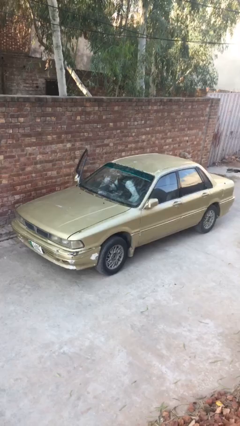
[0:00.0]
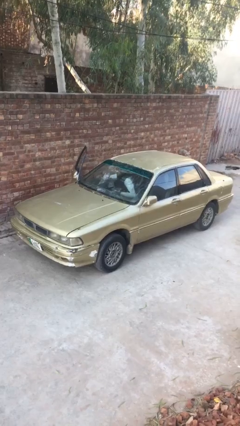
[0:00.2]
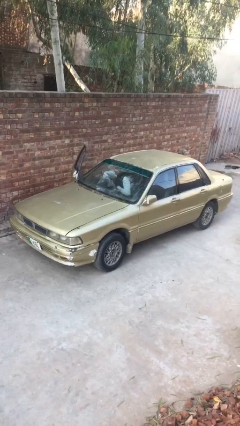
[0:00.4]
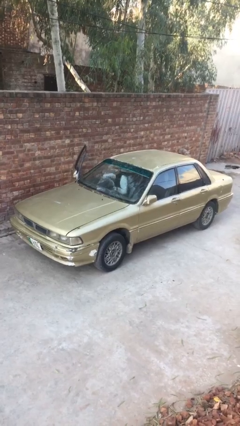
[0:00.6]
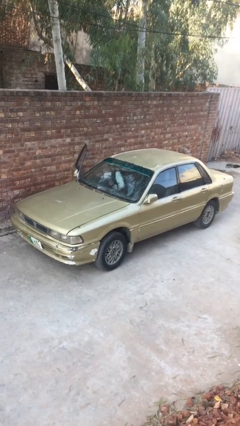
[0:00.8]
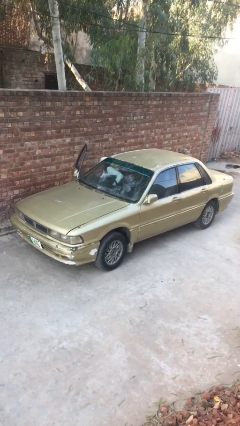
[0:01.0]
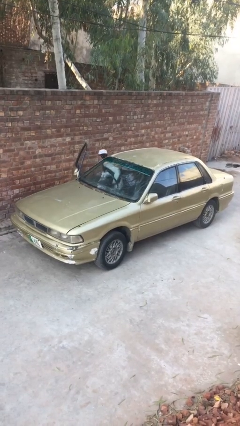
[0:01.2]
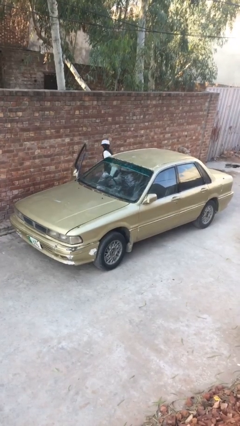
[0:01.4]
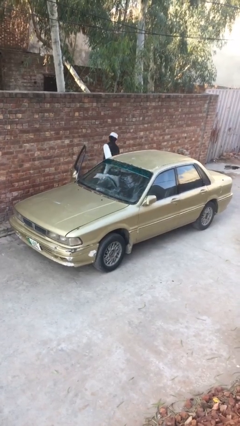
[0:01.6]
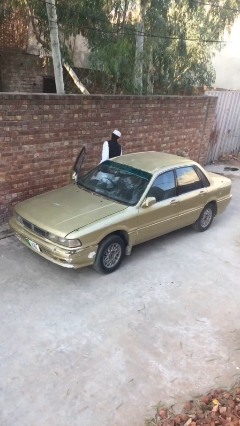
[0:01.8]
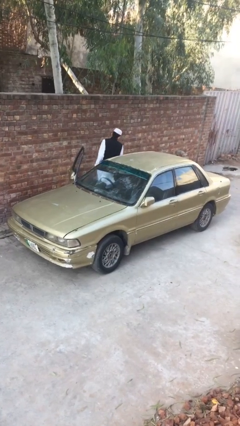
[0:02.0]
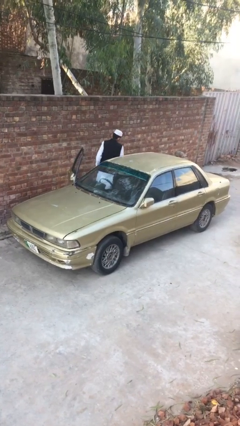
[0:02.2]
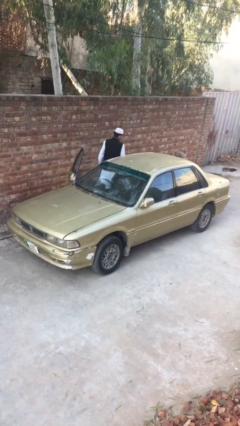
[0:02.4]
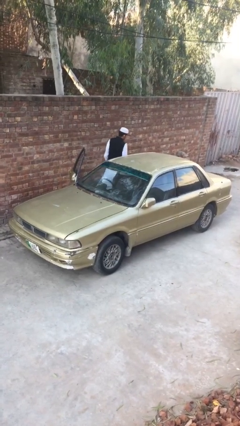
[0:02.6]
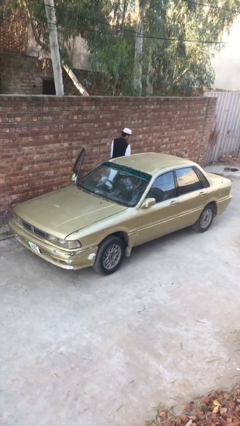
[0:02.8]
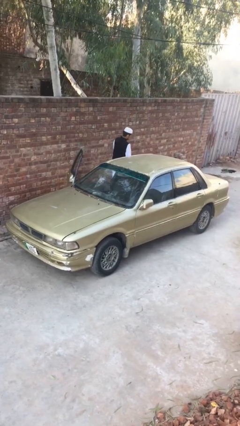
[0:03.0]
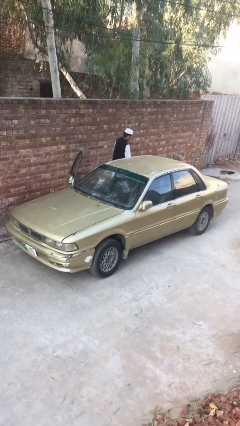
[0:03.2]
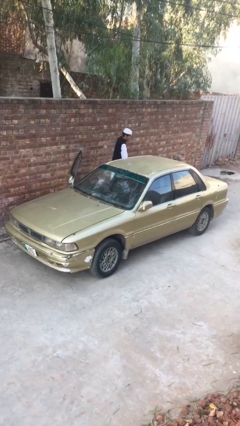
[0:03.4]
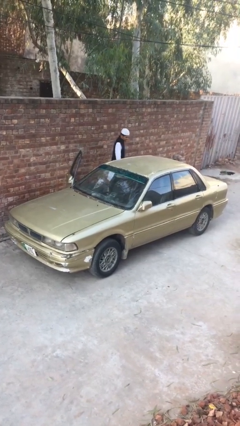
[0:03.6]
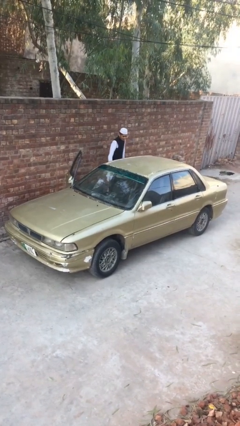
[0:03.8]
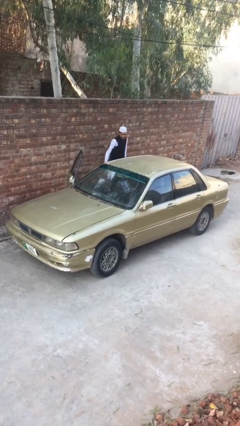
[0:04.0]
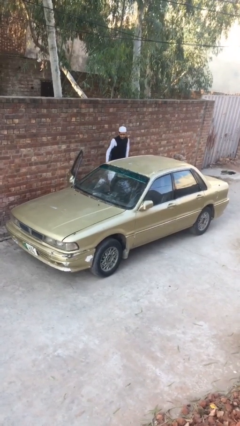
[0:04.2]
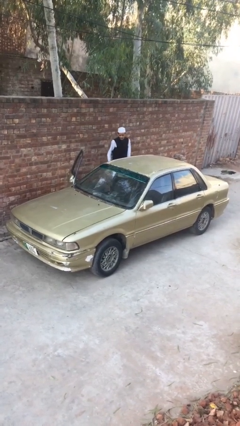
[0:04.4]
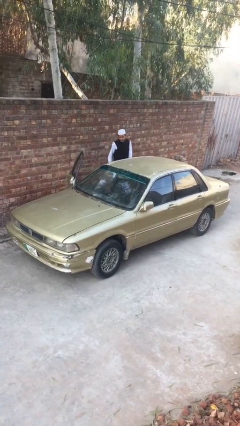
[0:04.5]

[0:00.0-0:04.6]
person exits car

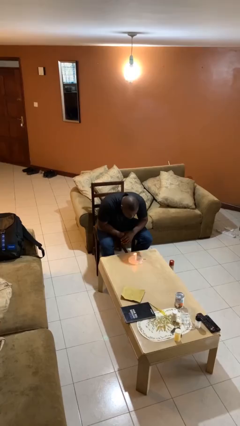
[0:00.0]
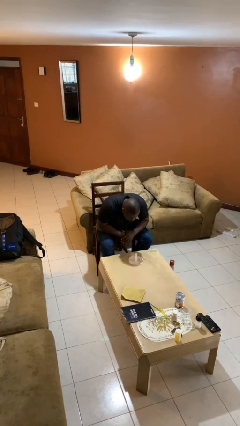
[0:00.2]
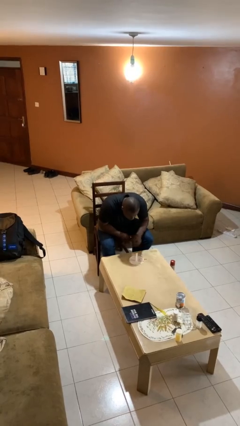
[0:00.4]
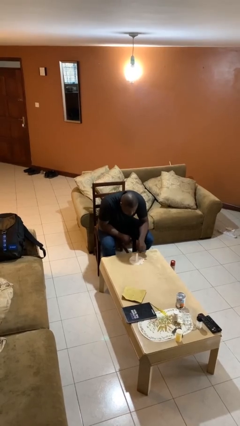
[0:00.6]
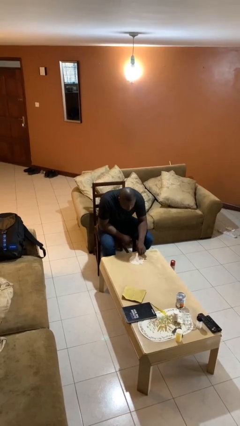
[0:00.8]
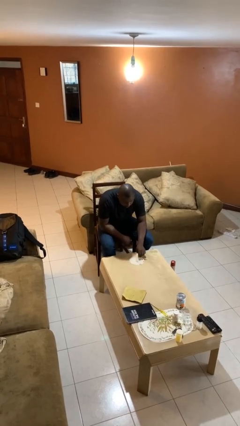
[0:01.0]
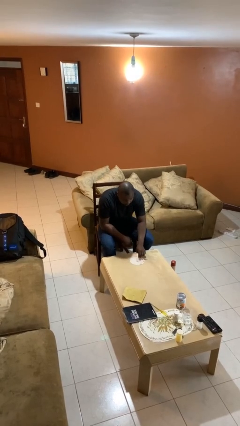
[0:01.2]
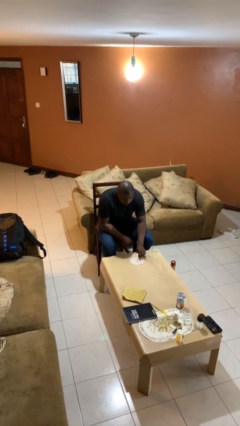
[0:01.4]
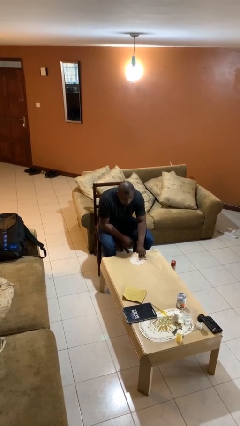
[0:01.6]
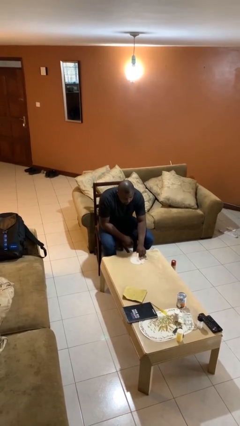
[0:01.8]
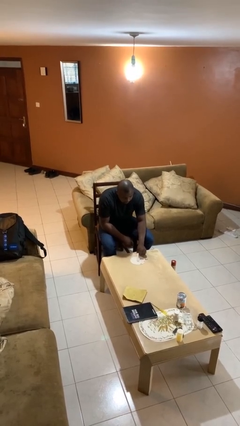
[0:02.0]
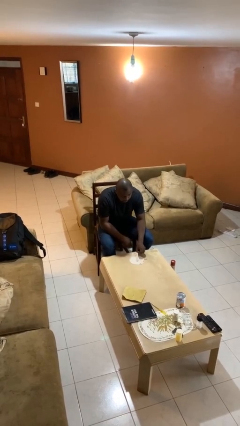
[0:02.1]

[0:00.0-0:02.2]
person extinguishes candle

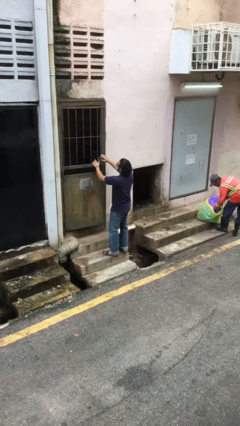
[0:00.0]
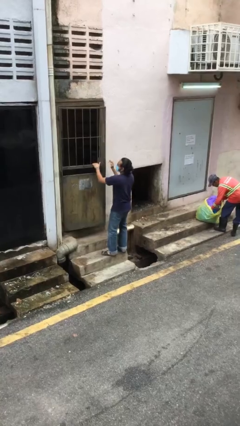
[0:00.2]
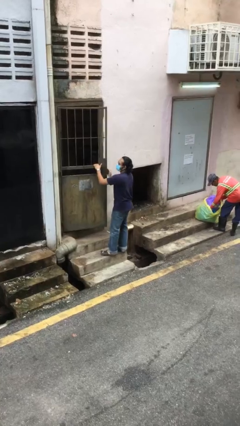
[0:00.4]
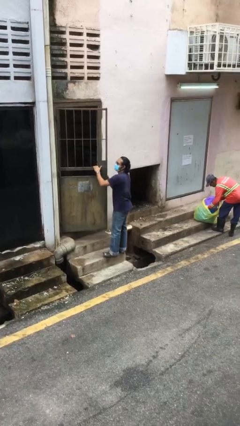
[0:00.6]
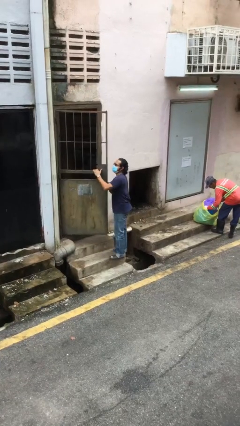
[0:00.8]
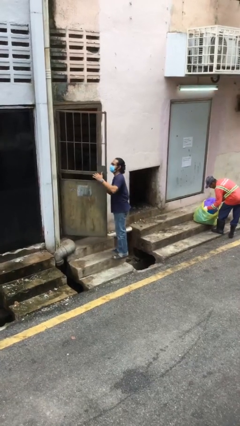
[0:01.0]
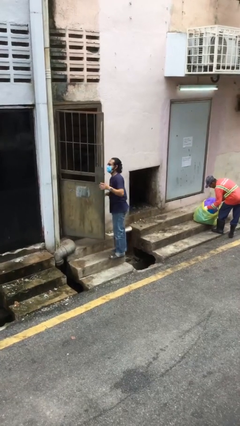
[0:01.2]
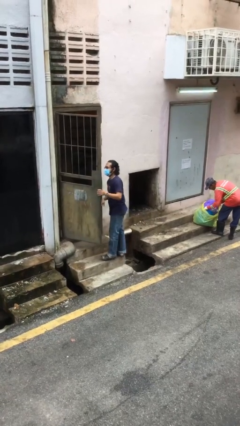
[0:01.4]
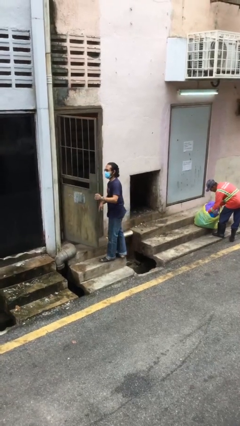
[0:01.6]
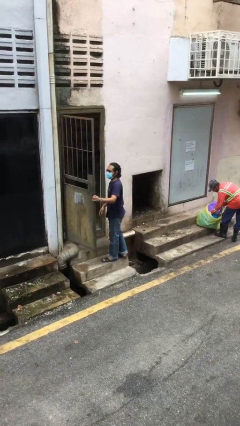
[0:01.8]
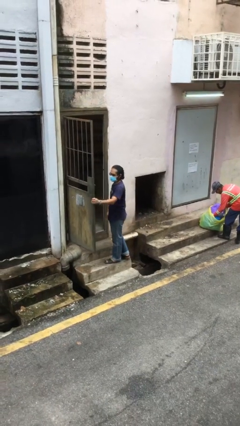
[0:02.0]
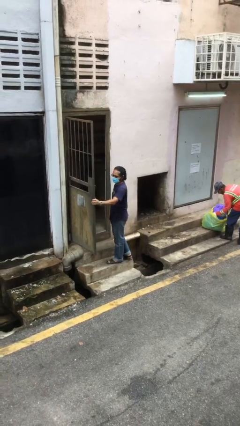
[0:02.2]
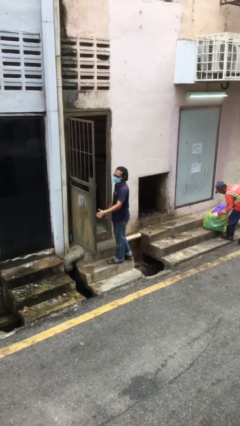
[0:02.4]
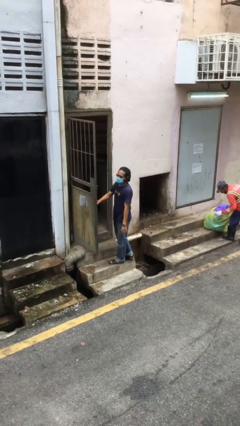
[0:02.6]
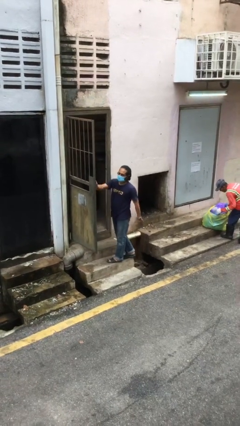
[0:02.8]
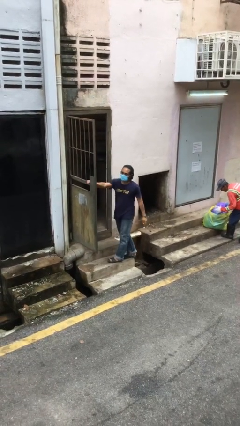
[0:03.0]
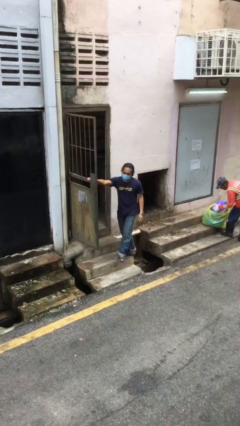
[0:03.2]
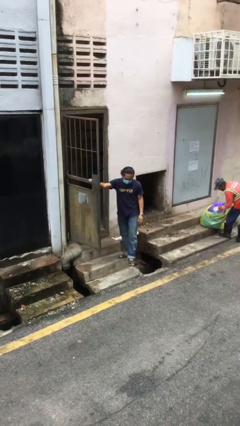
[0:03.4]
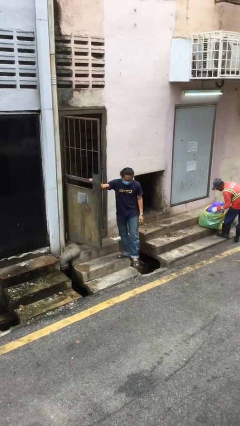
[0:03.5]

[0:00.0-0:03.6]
person opens facility door

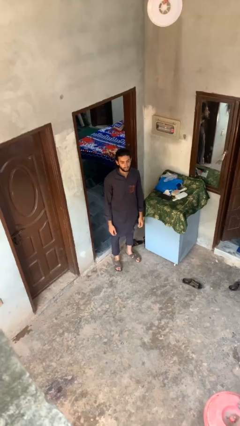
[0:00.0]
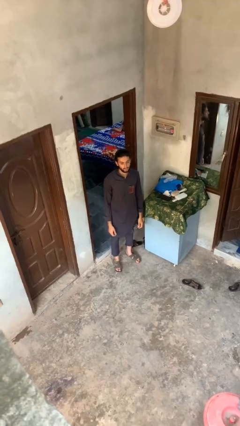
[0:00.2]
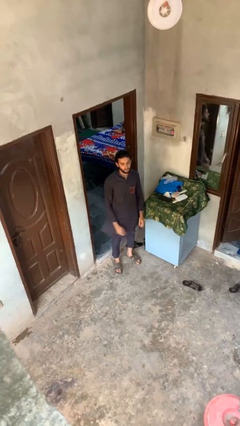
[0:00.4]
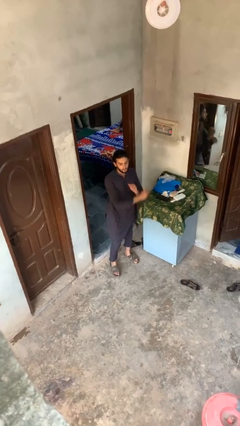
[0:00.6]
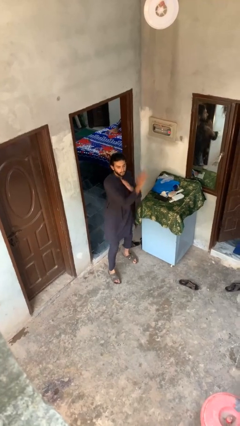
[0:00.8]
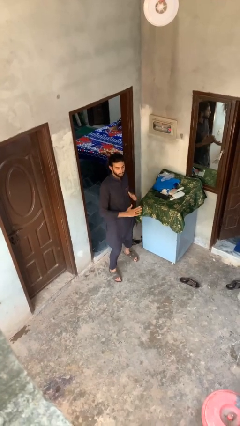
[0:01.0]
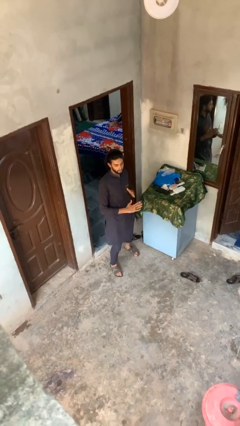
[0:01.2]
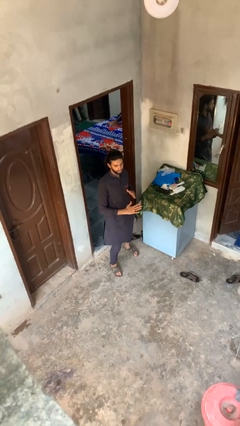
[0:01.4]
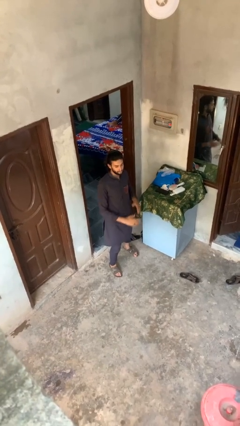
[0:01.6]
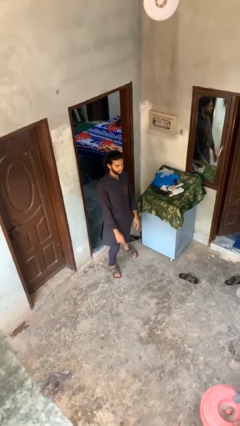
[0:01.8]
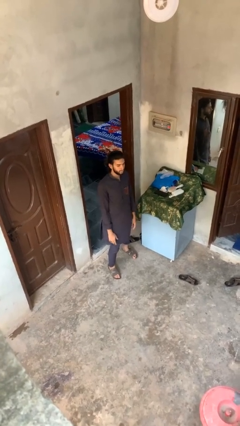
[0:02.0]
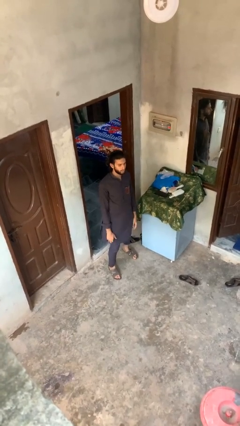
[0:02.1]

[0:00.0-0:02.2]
person karate chop

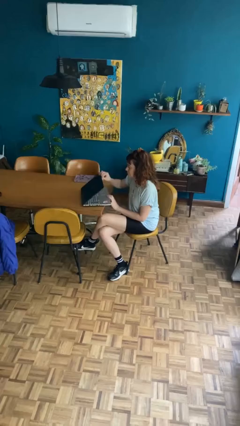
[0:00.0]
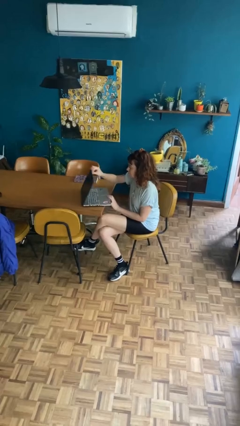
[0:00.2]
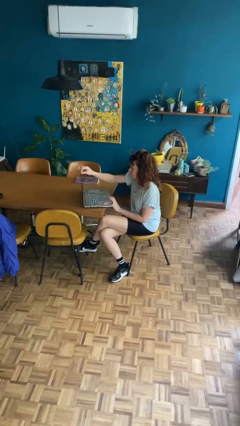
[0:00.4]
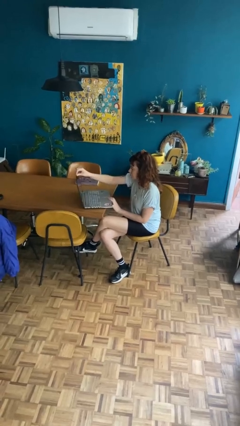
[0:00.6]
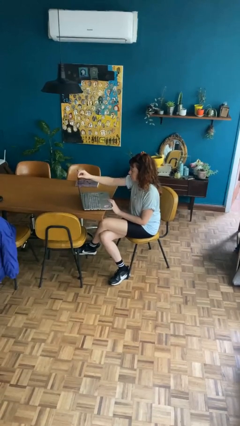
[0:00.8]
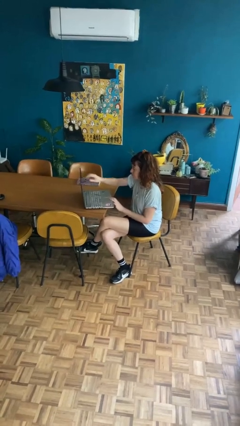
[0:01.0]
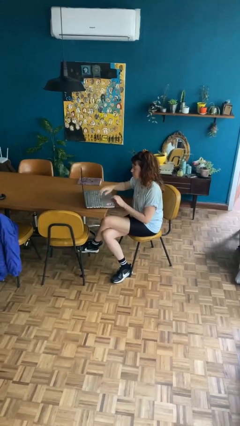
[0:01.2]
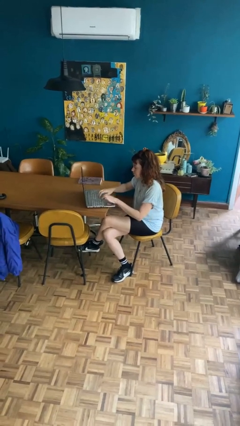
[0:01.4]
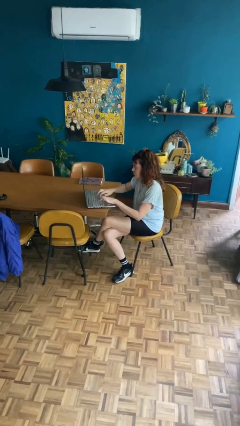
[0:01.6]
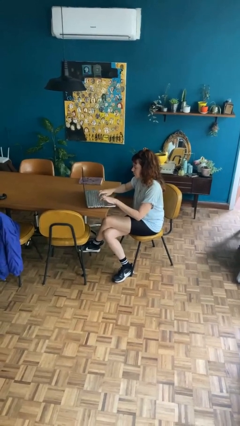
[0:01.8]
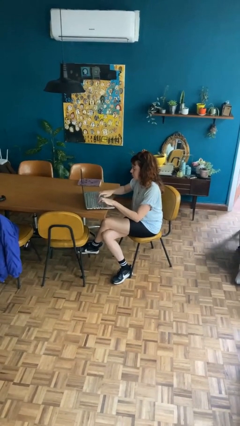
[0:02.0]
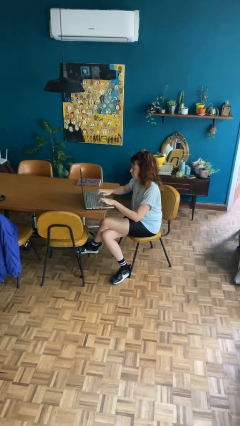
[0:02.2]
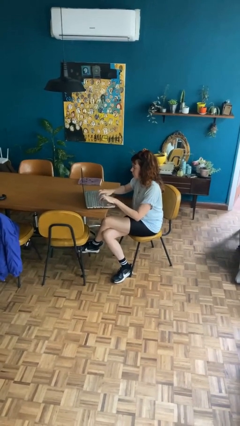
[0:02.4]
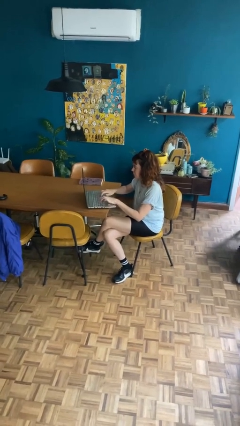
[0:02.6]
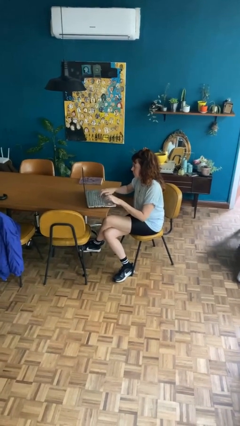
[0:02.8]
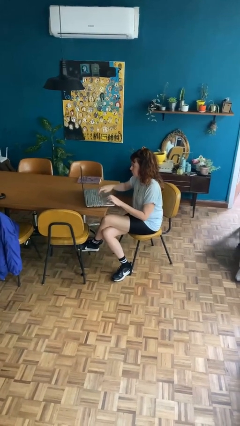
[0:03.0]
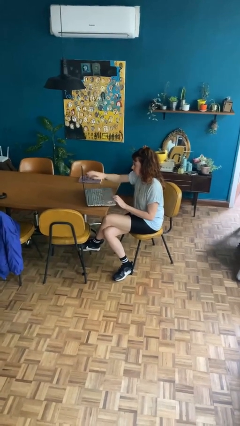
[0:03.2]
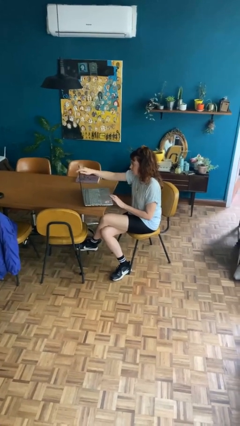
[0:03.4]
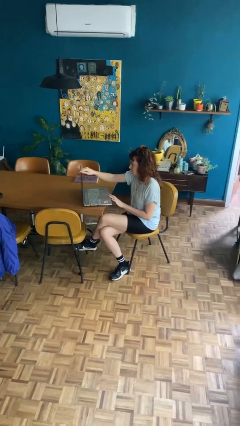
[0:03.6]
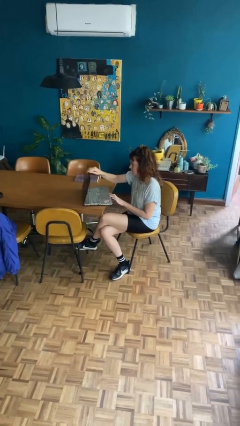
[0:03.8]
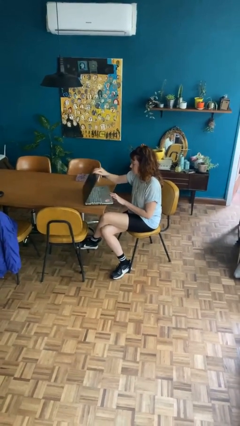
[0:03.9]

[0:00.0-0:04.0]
person interacts with laptop

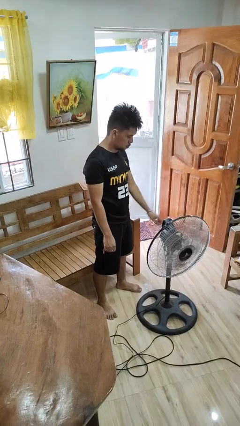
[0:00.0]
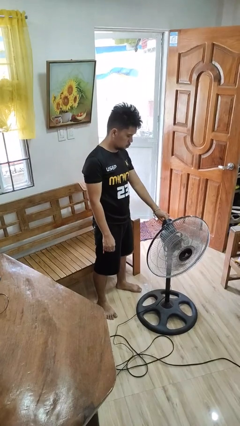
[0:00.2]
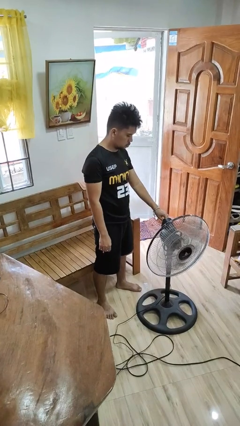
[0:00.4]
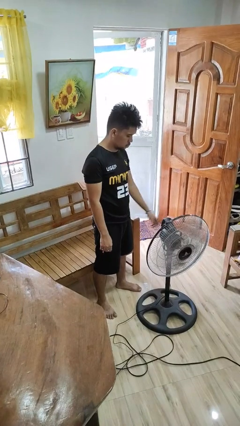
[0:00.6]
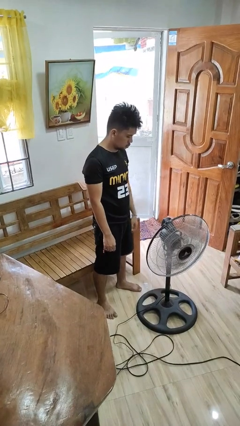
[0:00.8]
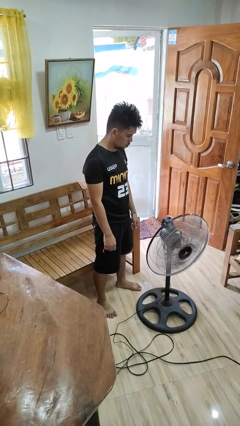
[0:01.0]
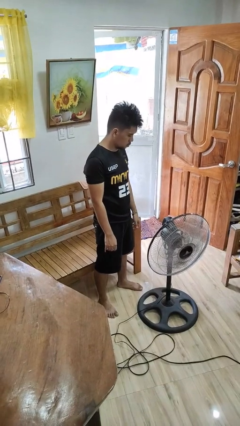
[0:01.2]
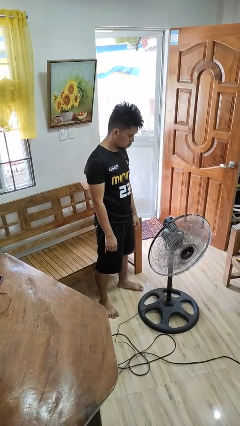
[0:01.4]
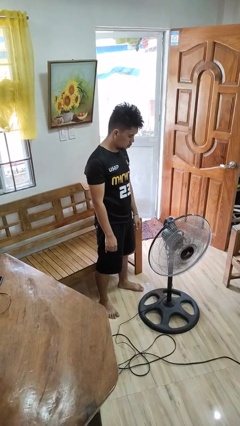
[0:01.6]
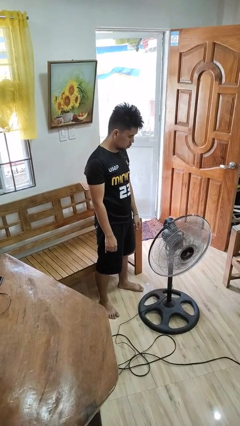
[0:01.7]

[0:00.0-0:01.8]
person turns off fan
